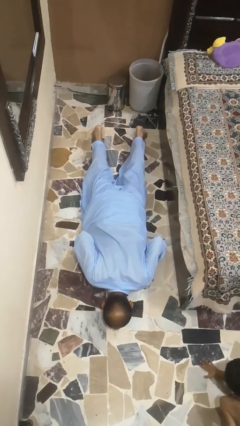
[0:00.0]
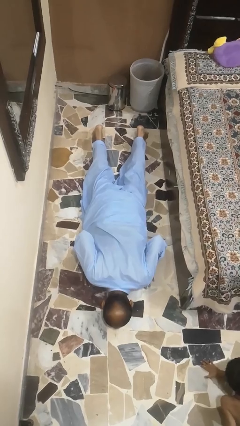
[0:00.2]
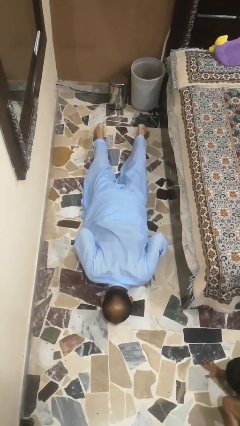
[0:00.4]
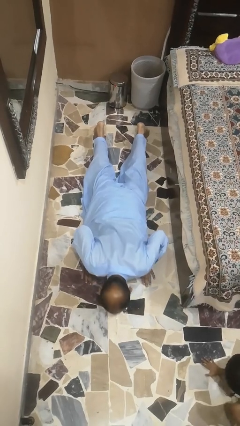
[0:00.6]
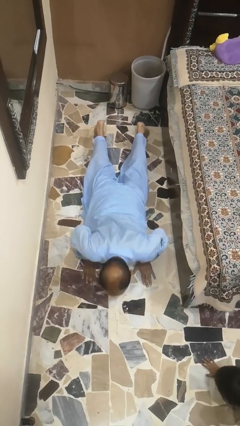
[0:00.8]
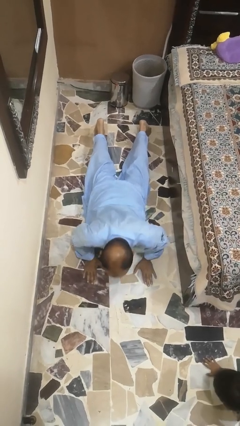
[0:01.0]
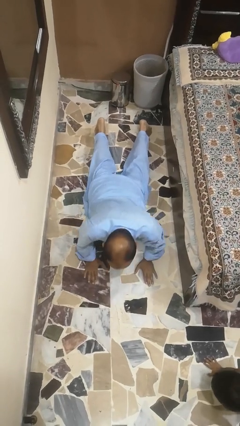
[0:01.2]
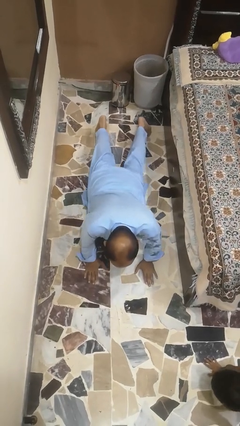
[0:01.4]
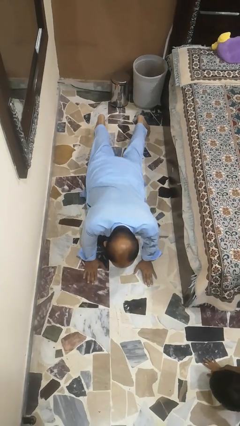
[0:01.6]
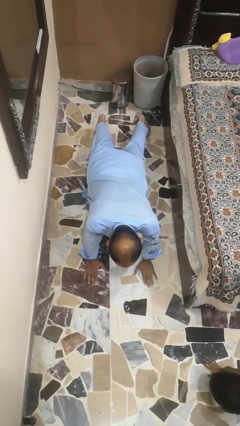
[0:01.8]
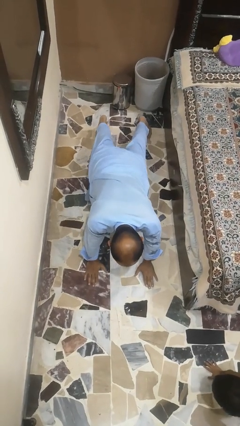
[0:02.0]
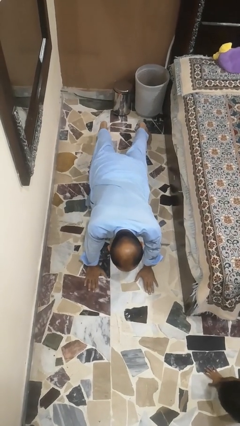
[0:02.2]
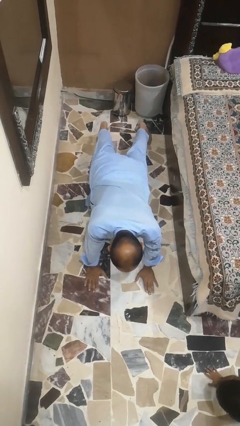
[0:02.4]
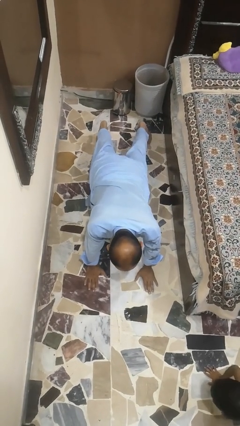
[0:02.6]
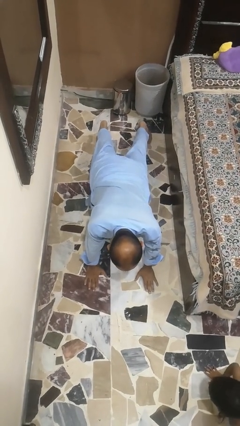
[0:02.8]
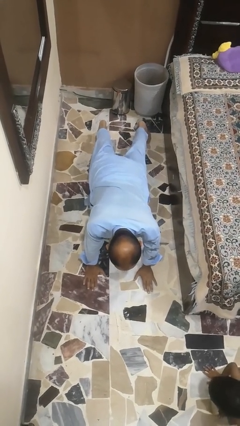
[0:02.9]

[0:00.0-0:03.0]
person exercises with pushup

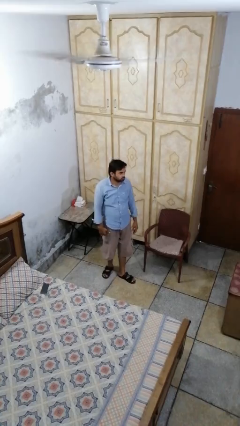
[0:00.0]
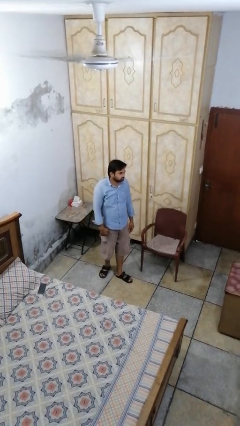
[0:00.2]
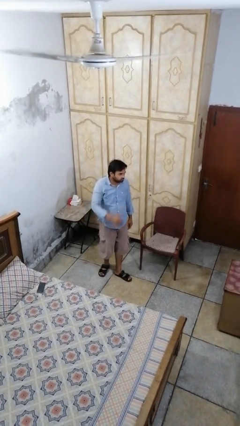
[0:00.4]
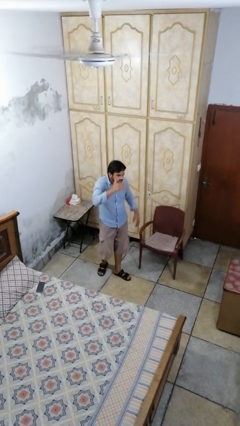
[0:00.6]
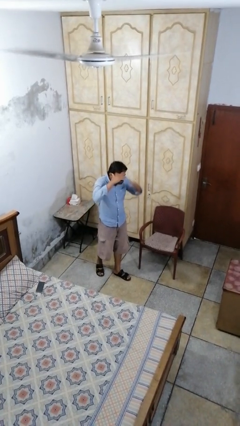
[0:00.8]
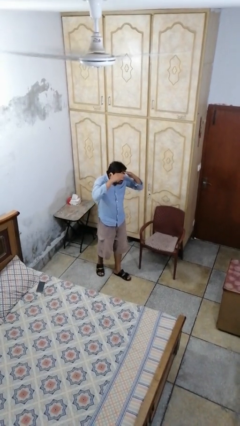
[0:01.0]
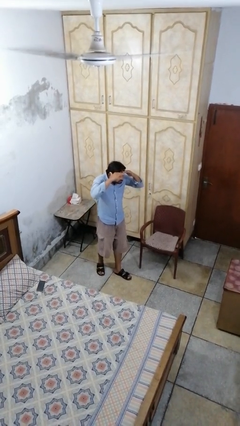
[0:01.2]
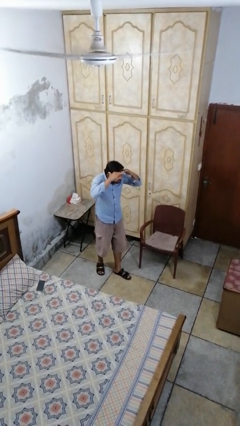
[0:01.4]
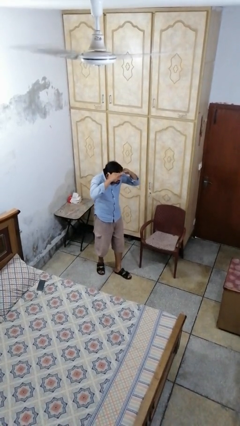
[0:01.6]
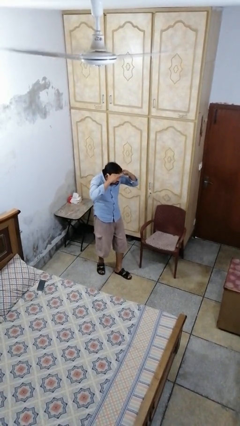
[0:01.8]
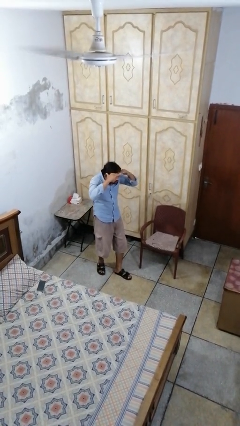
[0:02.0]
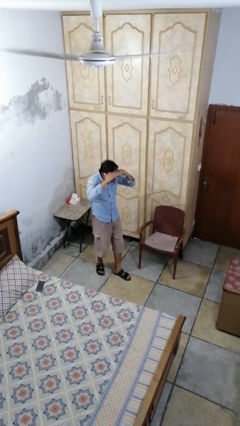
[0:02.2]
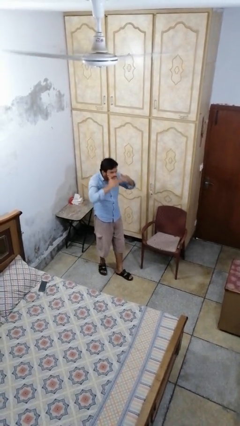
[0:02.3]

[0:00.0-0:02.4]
person shades eyes

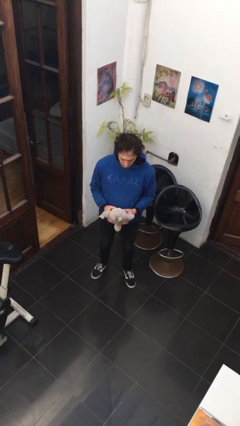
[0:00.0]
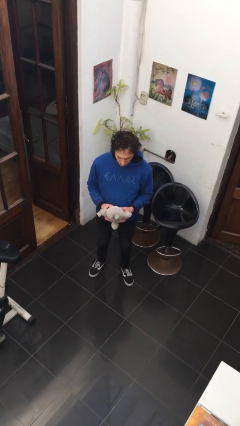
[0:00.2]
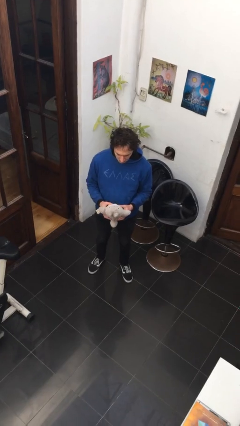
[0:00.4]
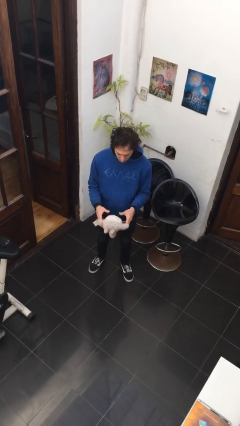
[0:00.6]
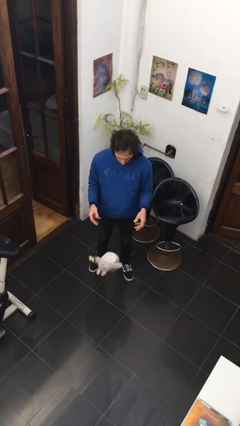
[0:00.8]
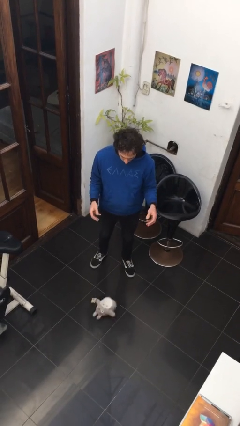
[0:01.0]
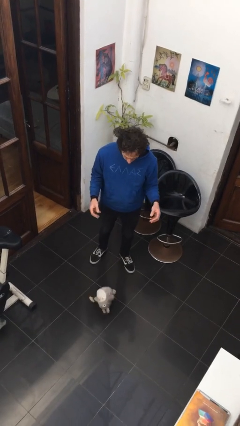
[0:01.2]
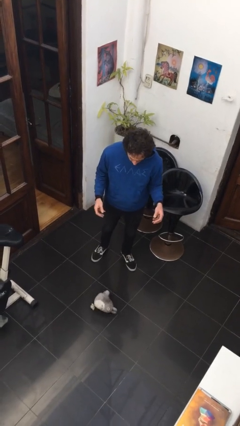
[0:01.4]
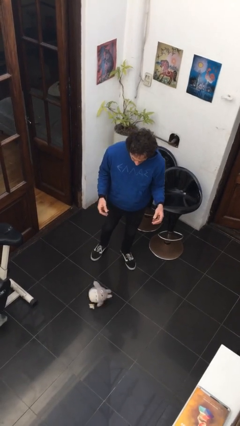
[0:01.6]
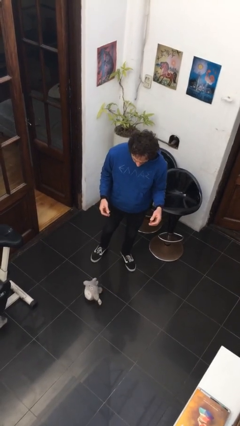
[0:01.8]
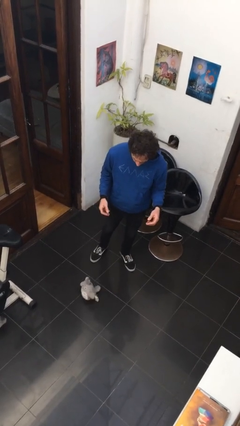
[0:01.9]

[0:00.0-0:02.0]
person drops object

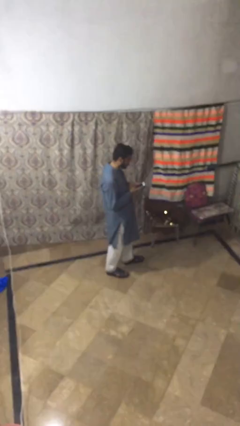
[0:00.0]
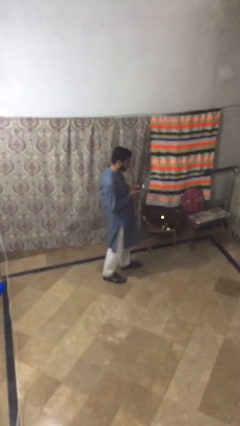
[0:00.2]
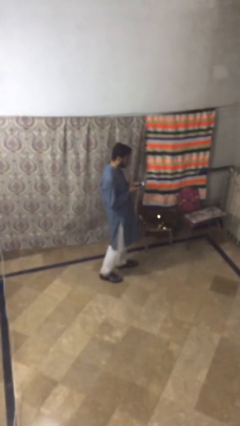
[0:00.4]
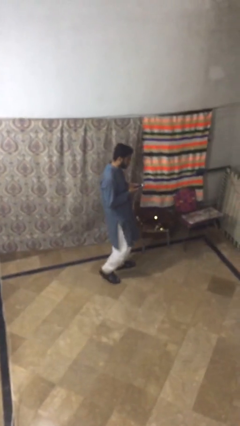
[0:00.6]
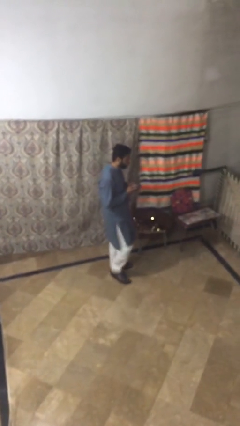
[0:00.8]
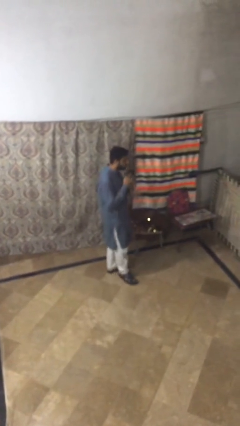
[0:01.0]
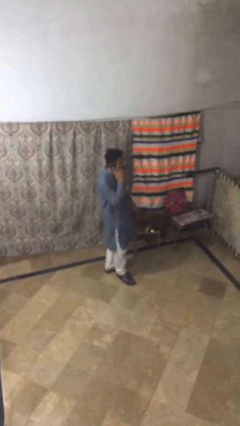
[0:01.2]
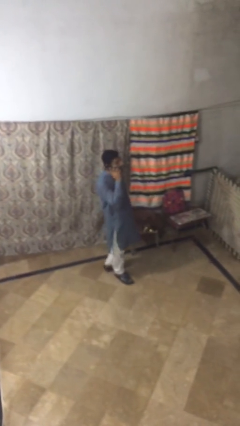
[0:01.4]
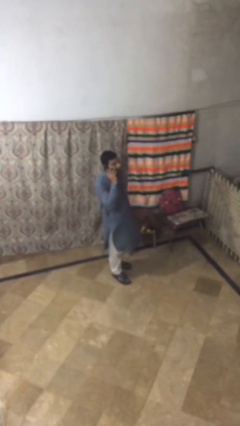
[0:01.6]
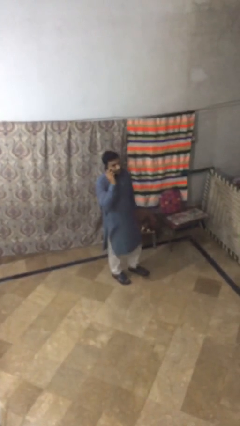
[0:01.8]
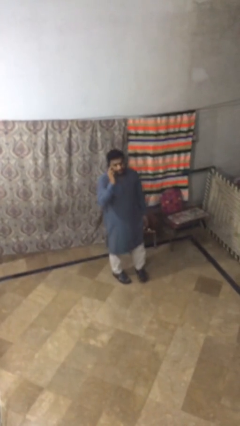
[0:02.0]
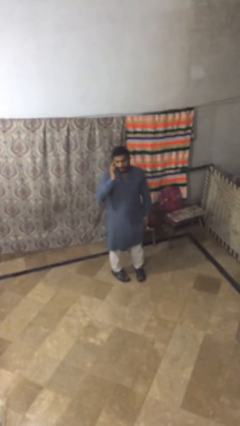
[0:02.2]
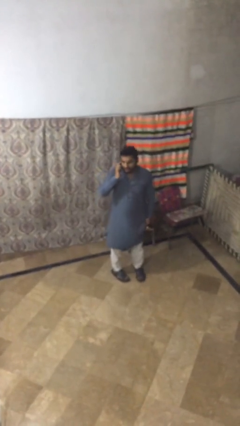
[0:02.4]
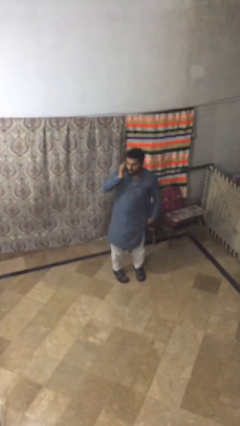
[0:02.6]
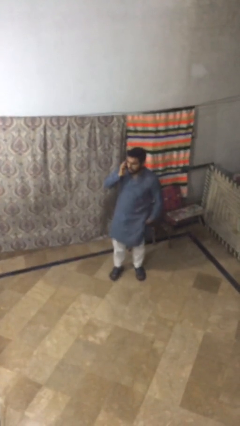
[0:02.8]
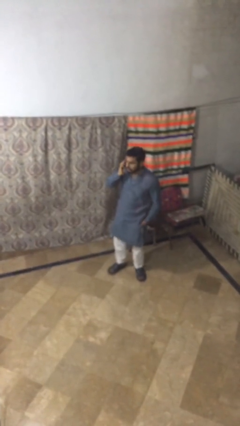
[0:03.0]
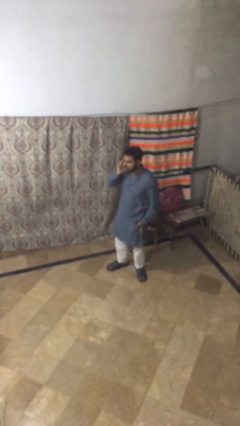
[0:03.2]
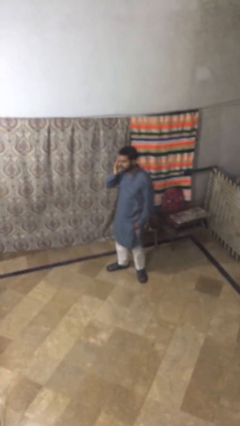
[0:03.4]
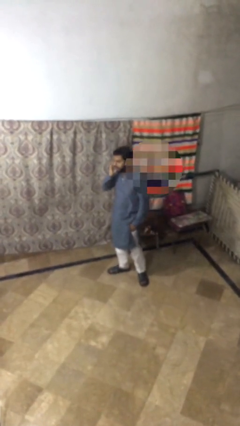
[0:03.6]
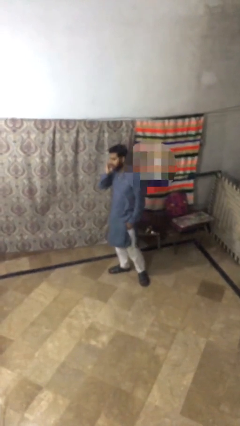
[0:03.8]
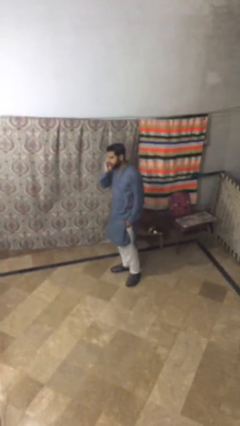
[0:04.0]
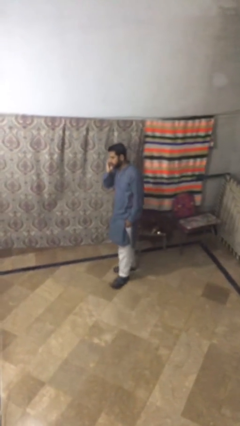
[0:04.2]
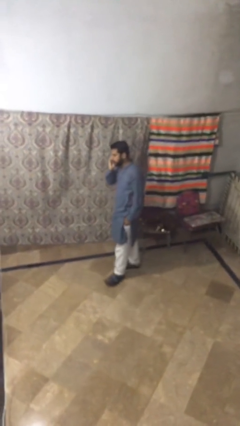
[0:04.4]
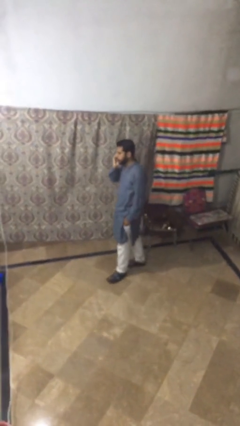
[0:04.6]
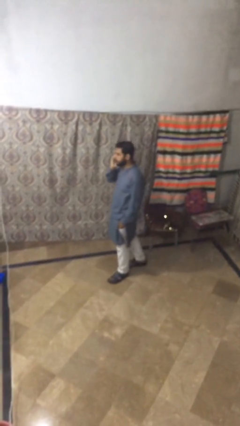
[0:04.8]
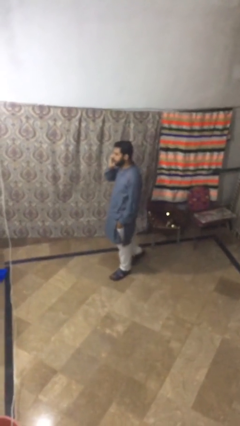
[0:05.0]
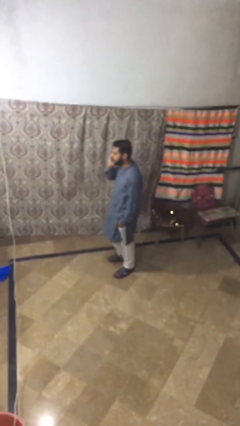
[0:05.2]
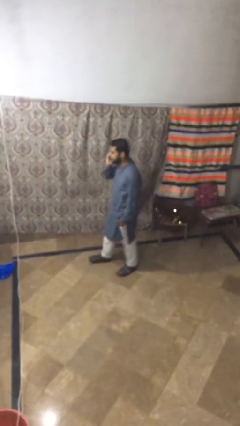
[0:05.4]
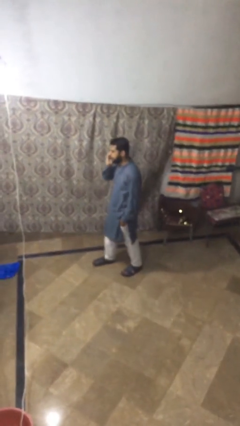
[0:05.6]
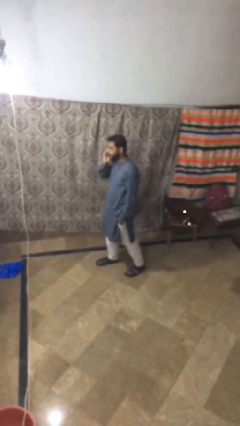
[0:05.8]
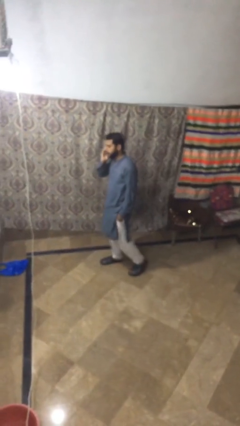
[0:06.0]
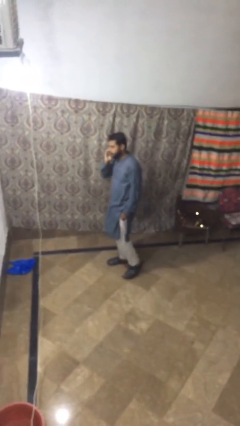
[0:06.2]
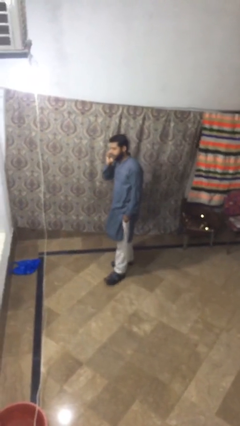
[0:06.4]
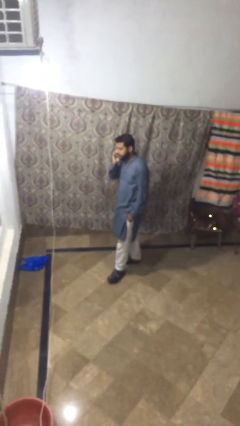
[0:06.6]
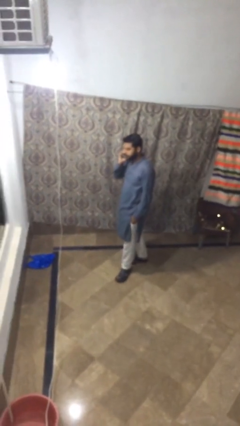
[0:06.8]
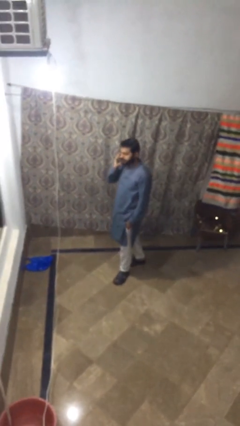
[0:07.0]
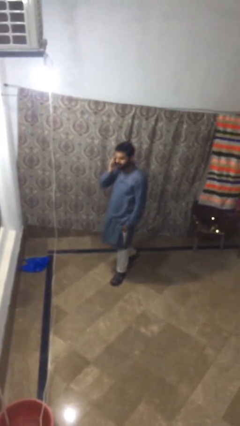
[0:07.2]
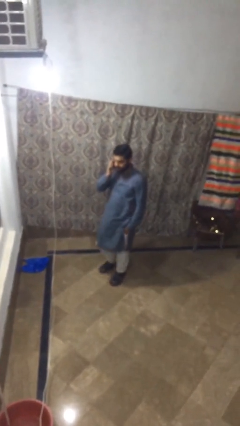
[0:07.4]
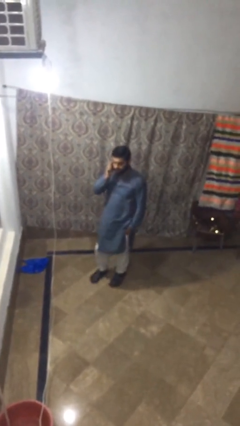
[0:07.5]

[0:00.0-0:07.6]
person talks on phone

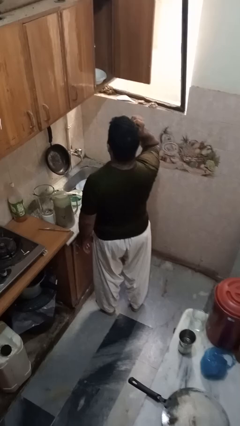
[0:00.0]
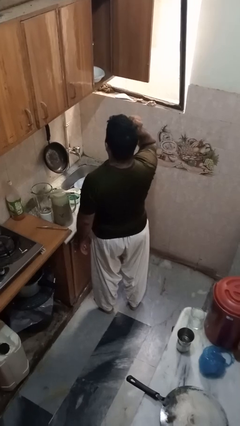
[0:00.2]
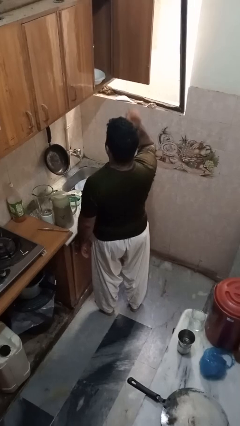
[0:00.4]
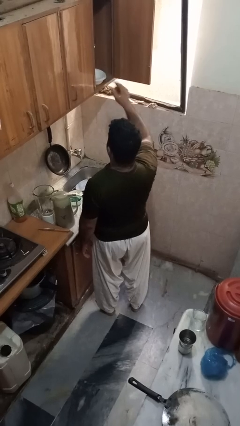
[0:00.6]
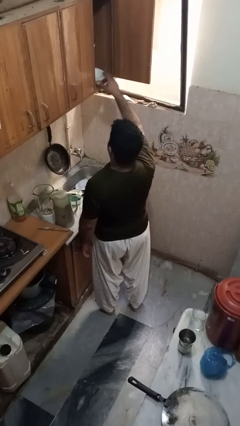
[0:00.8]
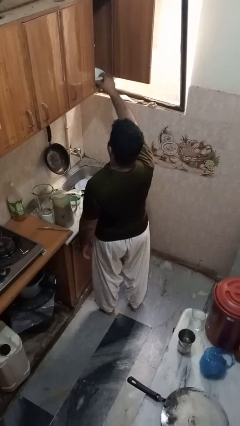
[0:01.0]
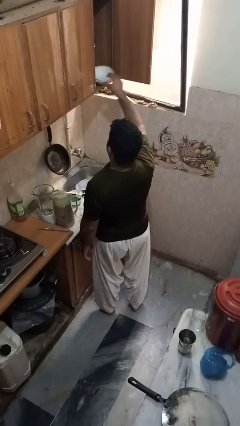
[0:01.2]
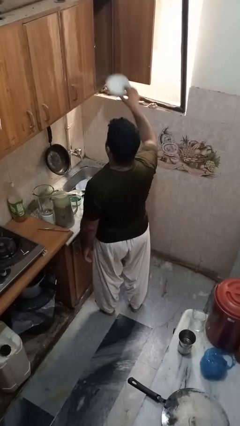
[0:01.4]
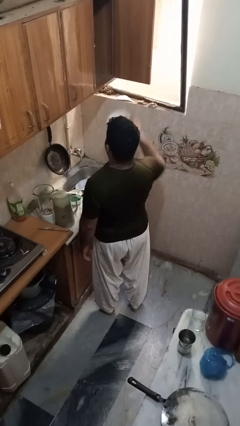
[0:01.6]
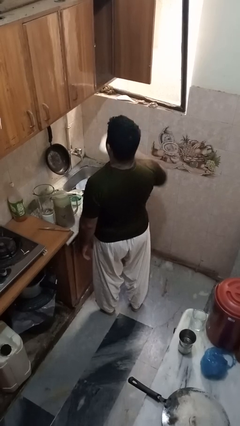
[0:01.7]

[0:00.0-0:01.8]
person takes object from cabinet

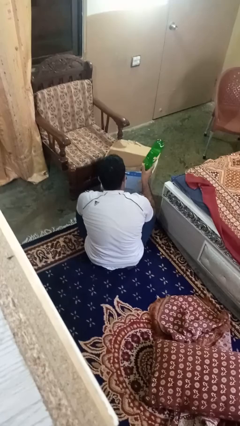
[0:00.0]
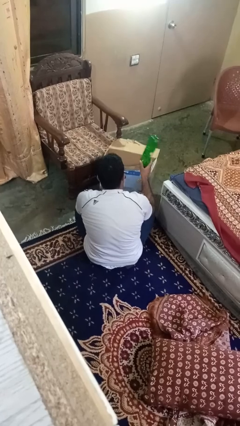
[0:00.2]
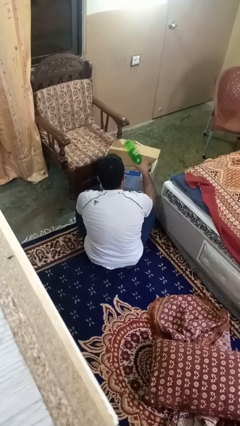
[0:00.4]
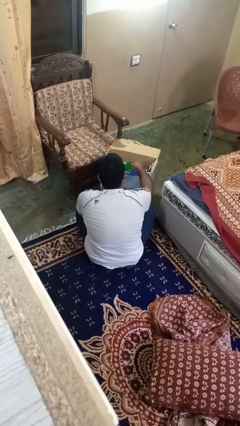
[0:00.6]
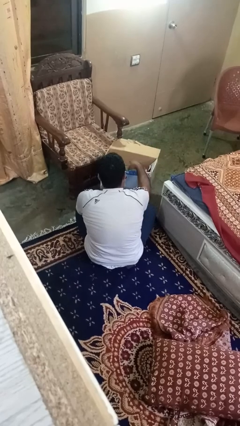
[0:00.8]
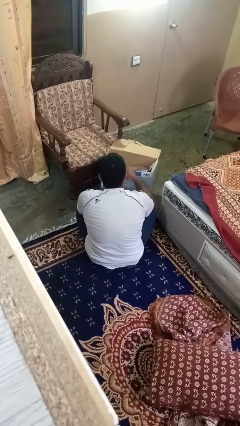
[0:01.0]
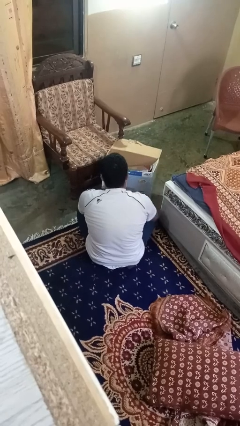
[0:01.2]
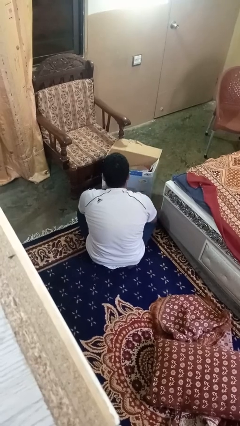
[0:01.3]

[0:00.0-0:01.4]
person puts object into box
